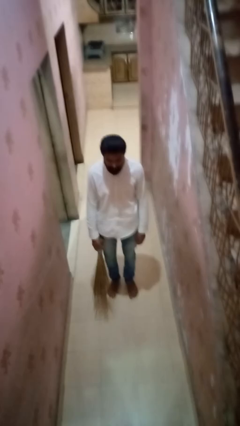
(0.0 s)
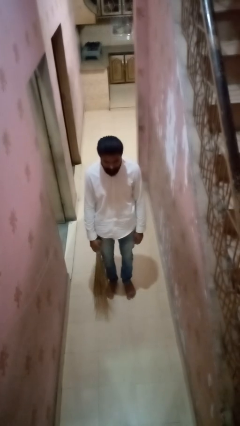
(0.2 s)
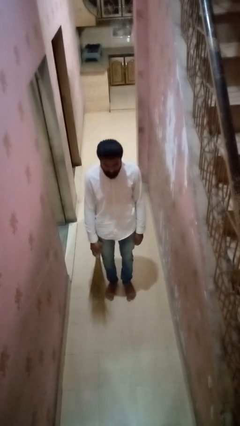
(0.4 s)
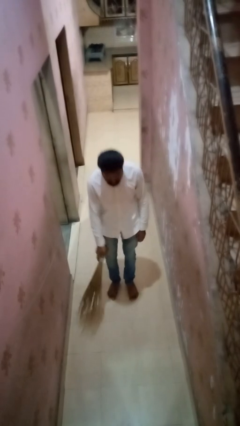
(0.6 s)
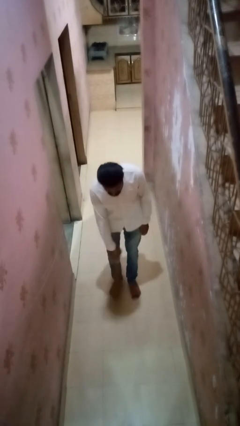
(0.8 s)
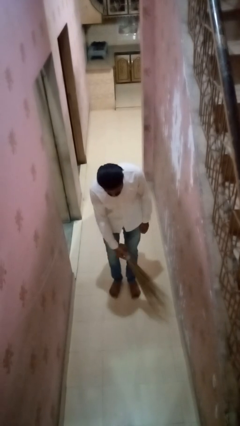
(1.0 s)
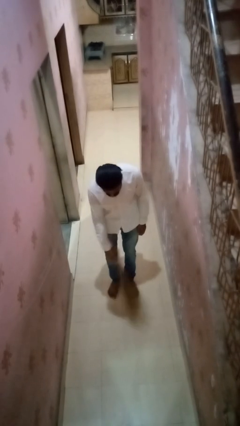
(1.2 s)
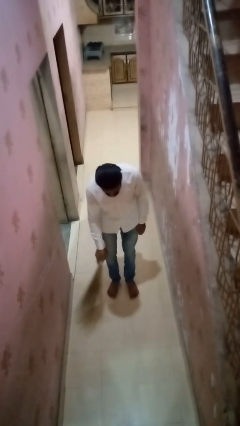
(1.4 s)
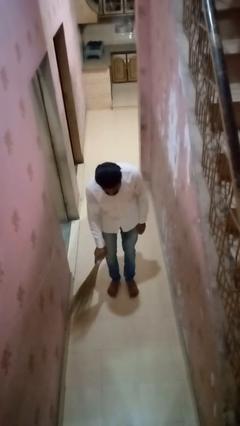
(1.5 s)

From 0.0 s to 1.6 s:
person sweeps floor

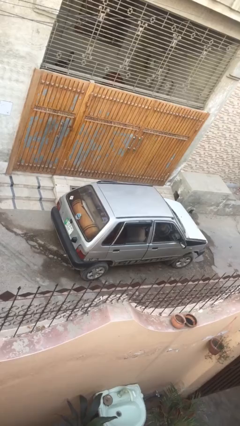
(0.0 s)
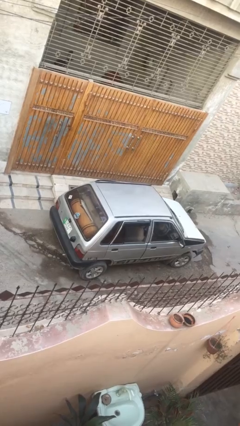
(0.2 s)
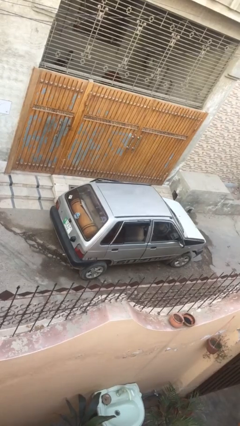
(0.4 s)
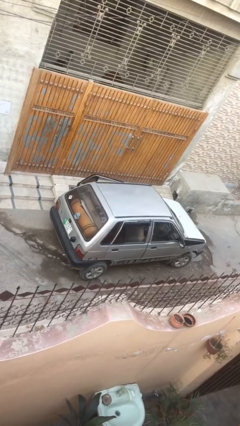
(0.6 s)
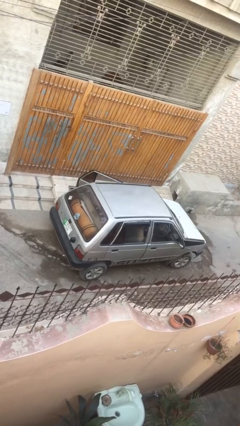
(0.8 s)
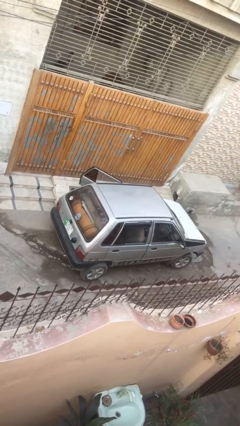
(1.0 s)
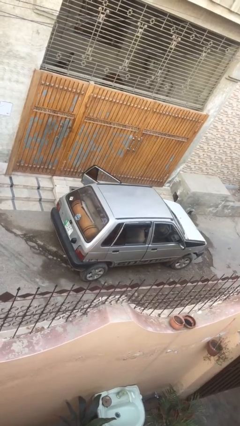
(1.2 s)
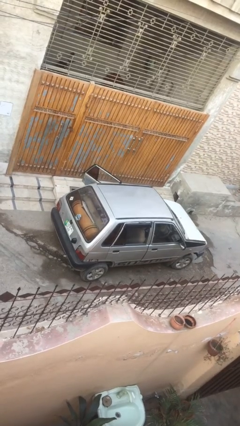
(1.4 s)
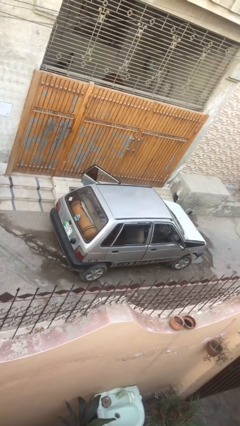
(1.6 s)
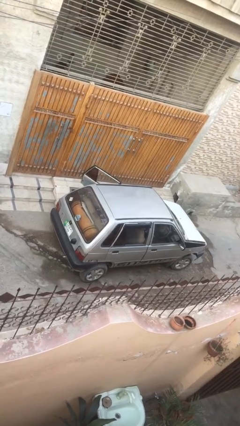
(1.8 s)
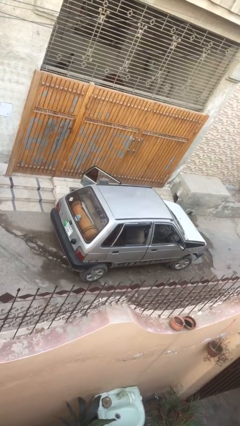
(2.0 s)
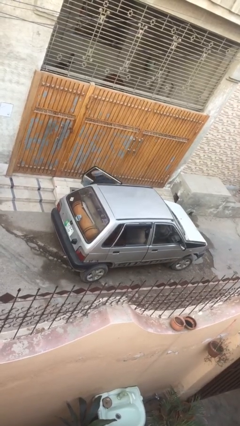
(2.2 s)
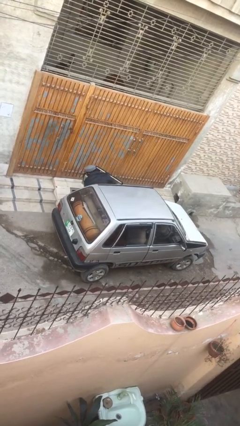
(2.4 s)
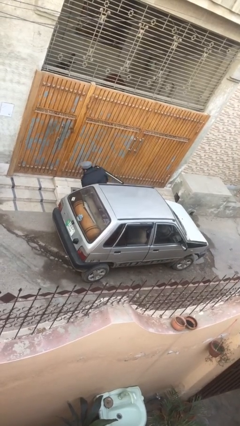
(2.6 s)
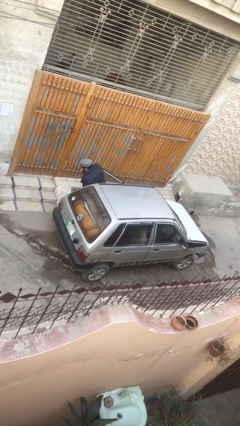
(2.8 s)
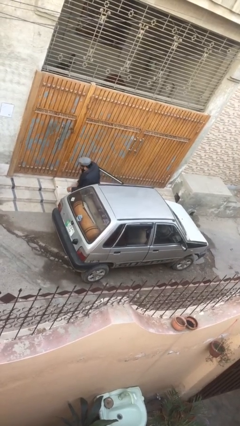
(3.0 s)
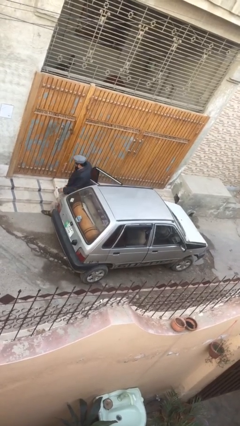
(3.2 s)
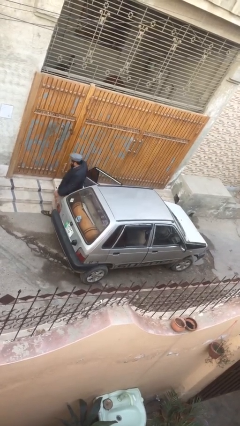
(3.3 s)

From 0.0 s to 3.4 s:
car drops off person

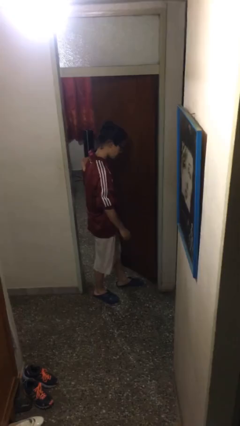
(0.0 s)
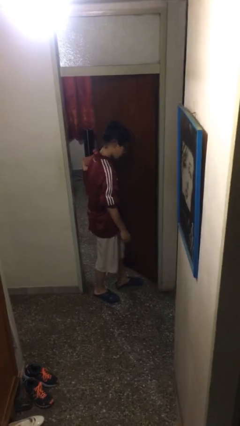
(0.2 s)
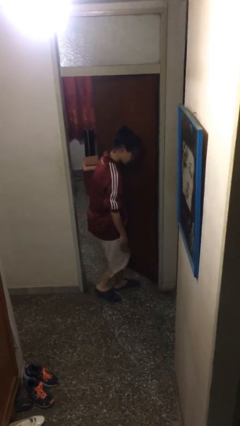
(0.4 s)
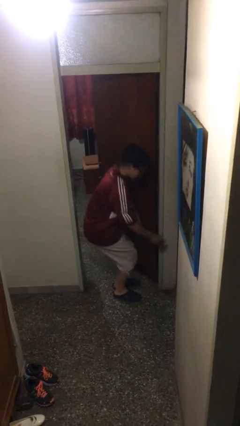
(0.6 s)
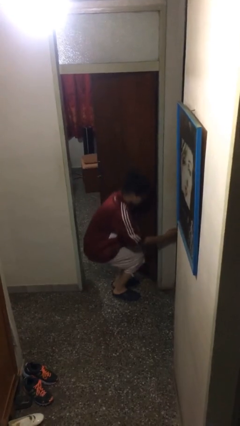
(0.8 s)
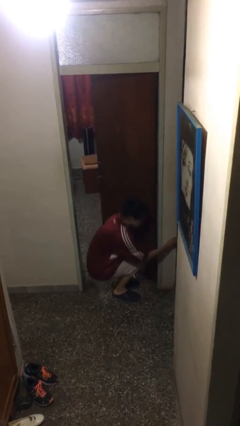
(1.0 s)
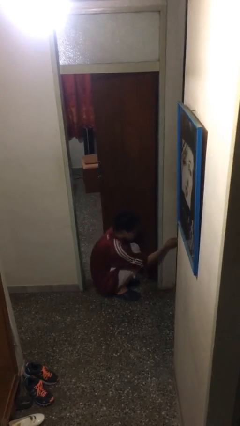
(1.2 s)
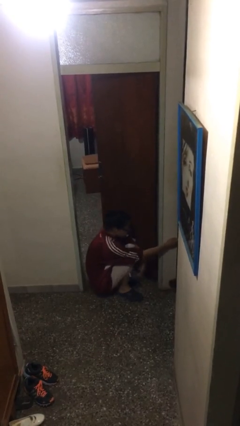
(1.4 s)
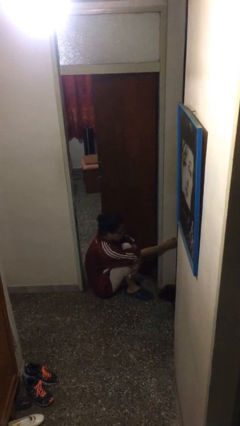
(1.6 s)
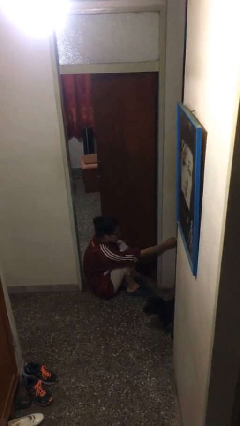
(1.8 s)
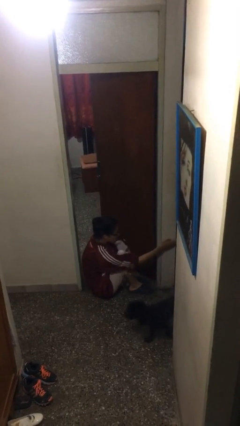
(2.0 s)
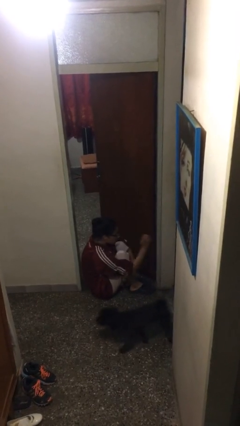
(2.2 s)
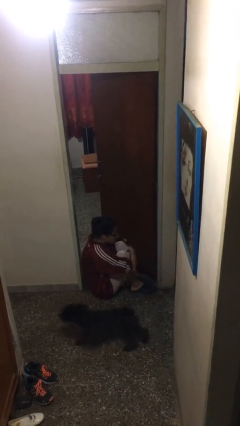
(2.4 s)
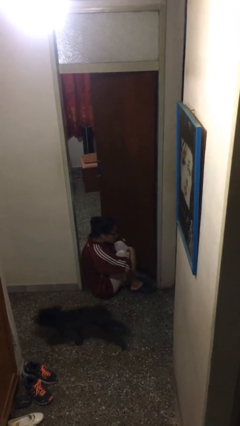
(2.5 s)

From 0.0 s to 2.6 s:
person sits down

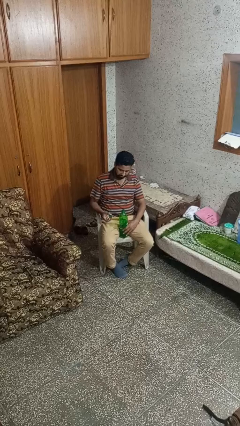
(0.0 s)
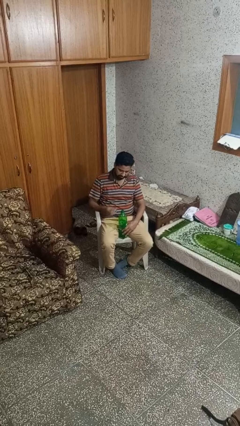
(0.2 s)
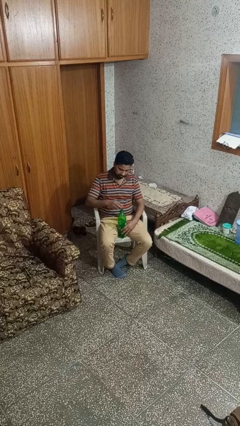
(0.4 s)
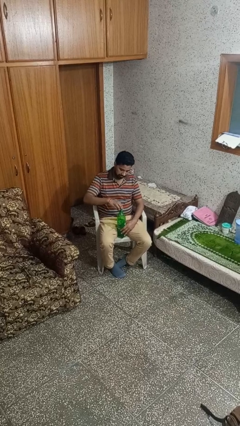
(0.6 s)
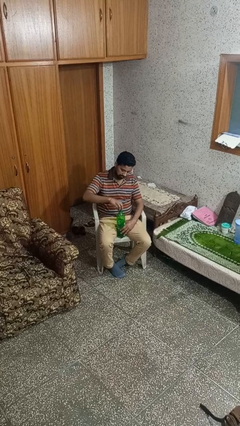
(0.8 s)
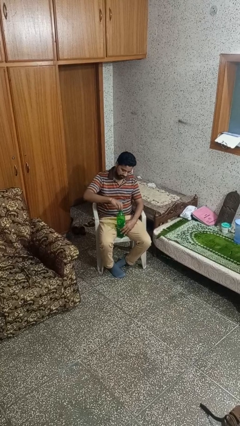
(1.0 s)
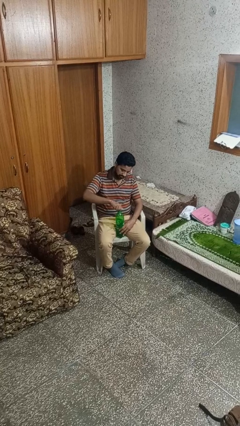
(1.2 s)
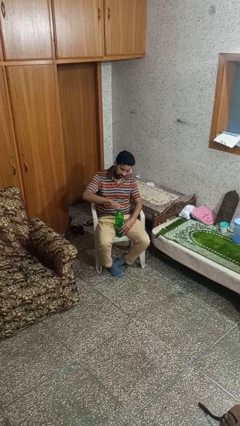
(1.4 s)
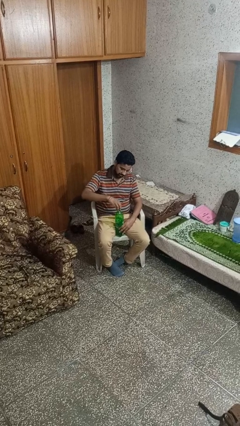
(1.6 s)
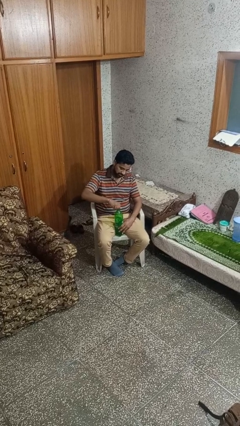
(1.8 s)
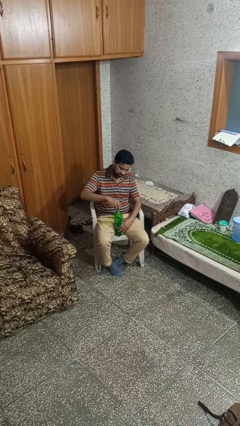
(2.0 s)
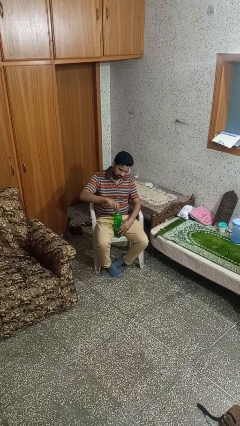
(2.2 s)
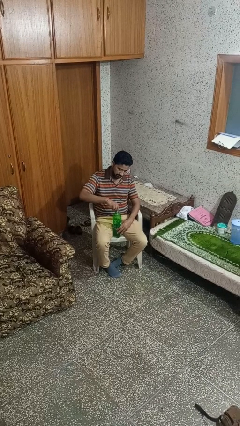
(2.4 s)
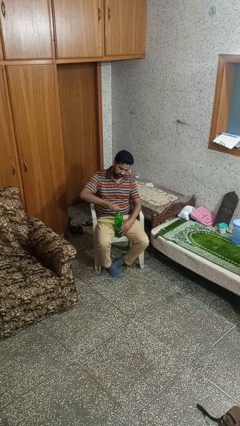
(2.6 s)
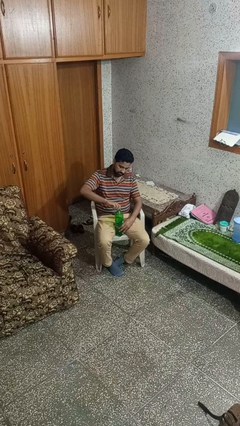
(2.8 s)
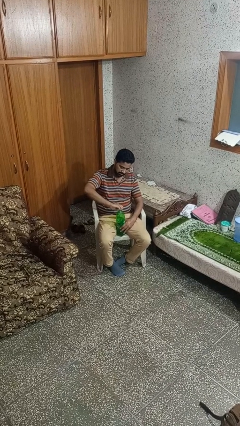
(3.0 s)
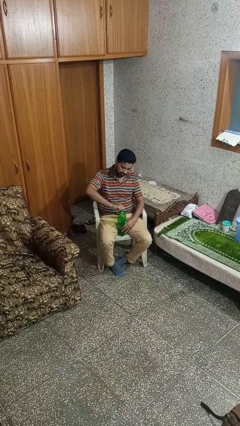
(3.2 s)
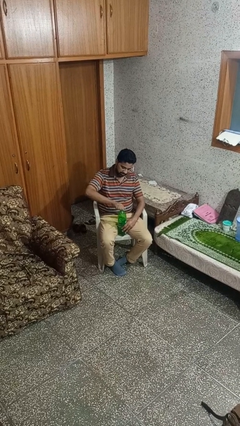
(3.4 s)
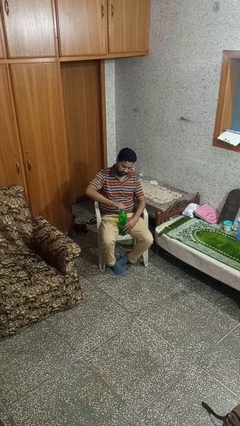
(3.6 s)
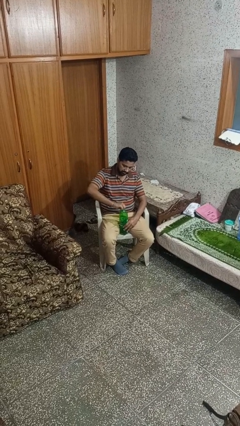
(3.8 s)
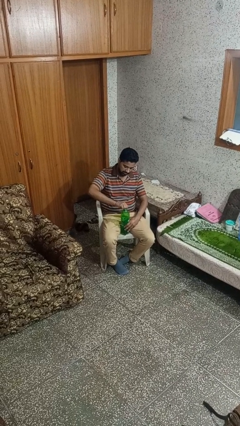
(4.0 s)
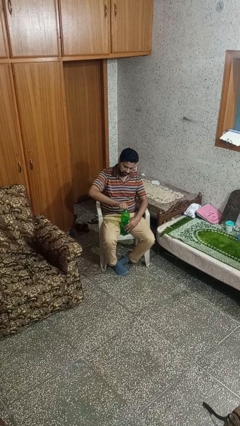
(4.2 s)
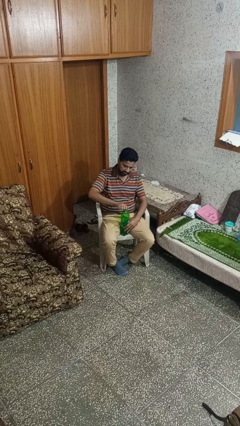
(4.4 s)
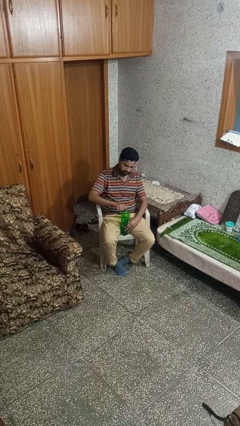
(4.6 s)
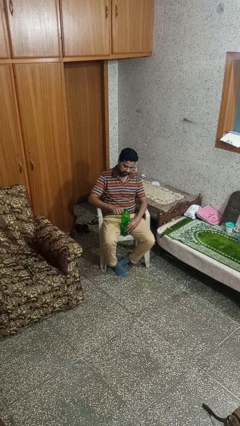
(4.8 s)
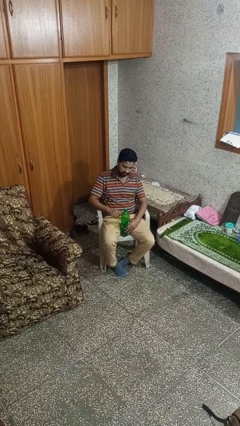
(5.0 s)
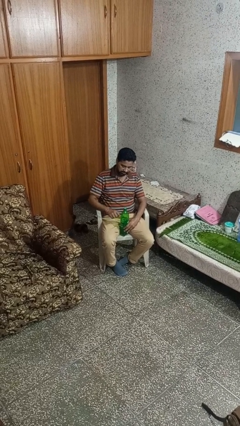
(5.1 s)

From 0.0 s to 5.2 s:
person screws lid to bottle

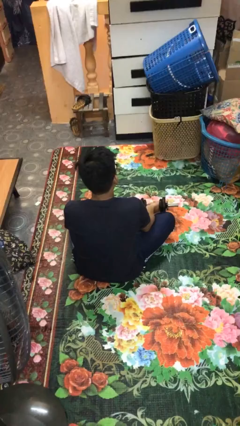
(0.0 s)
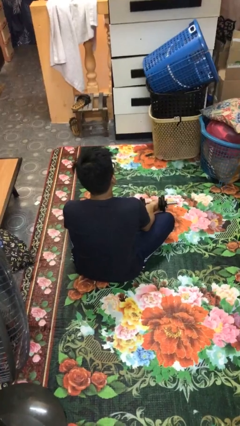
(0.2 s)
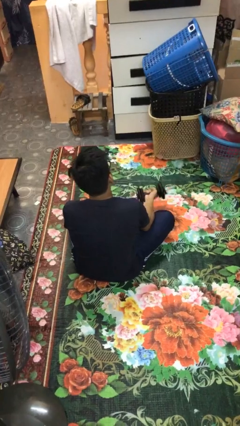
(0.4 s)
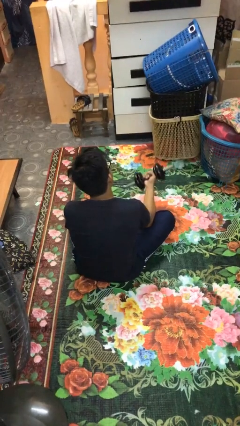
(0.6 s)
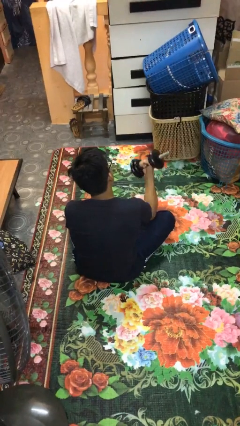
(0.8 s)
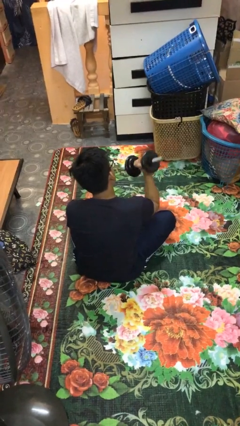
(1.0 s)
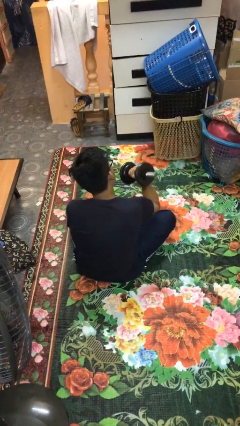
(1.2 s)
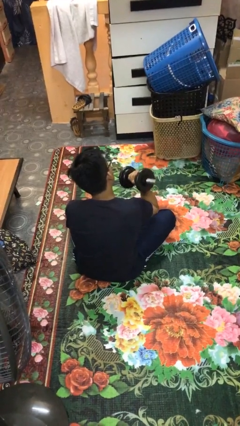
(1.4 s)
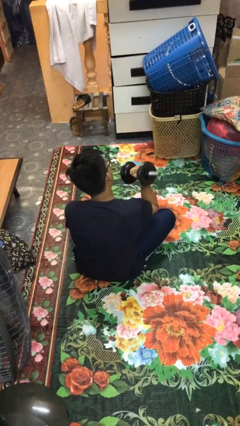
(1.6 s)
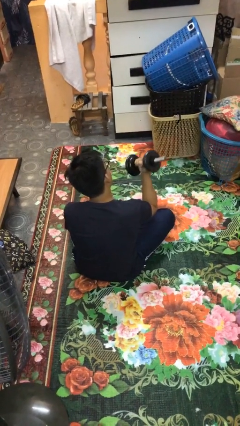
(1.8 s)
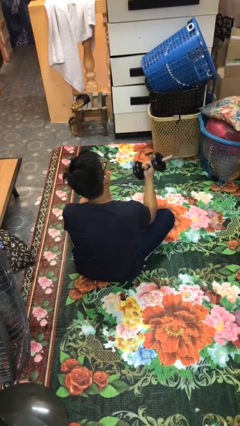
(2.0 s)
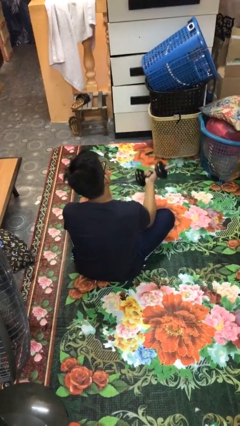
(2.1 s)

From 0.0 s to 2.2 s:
person lifts dumbbells

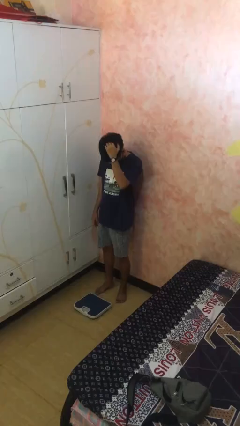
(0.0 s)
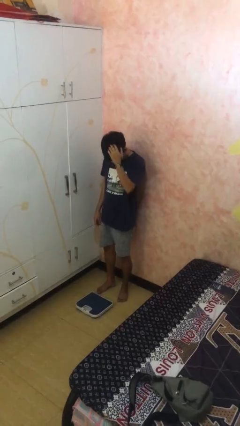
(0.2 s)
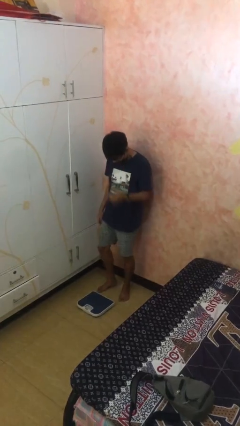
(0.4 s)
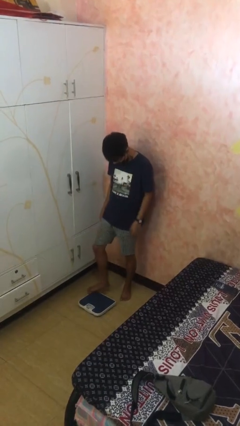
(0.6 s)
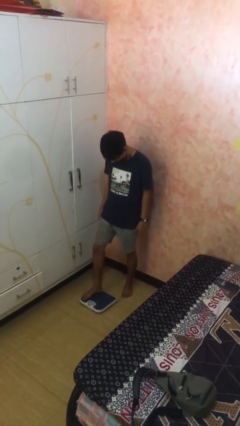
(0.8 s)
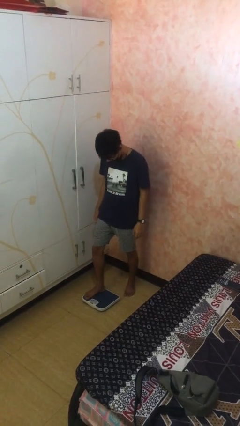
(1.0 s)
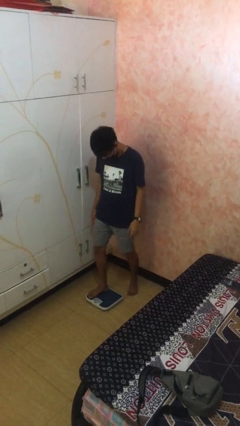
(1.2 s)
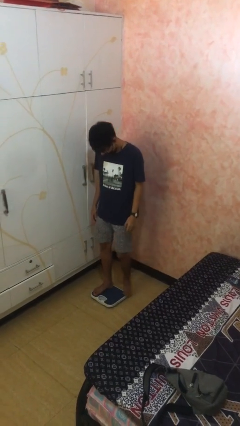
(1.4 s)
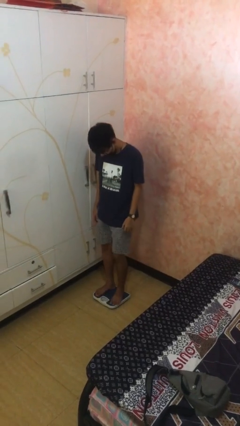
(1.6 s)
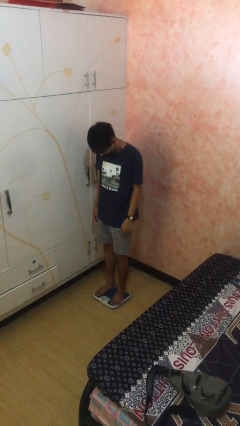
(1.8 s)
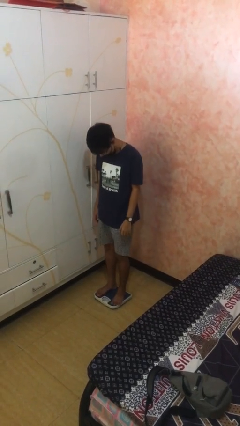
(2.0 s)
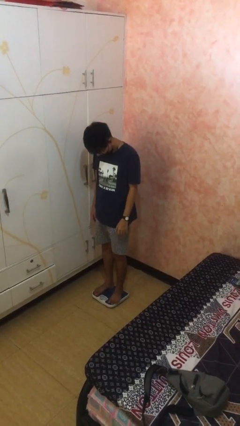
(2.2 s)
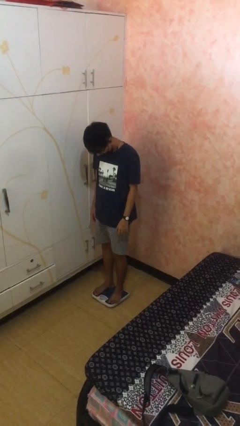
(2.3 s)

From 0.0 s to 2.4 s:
person uses bodyweight scale
